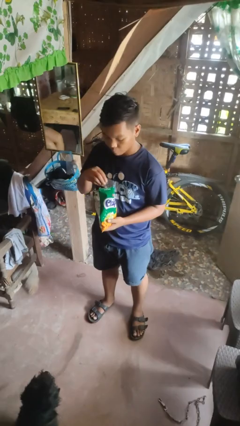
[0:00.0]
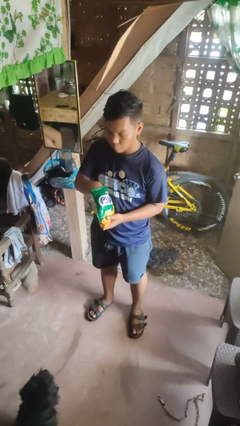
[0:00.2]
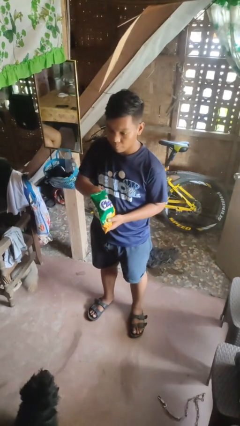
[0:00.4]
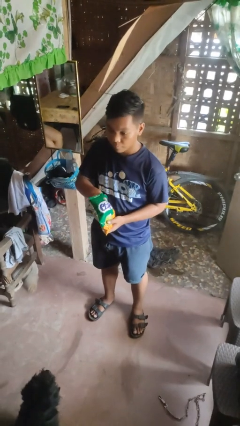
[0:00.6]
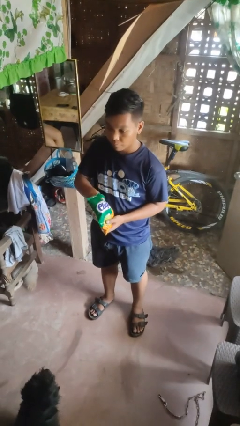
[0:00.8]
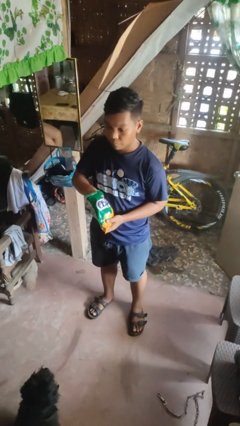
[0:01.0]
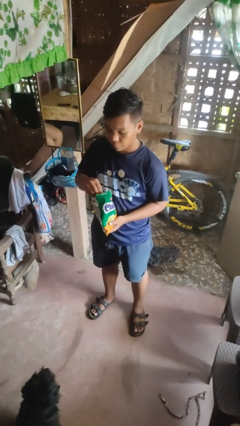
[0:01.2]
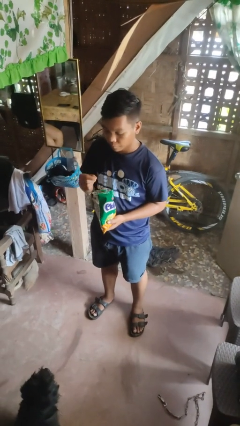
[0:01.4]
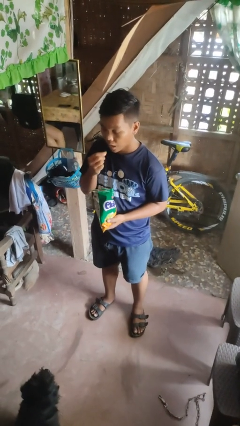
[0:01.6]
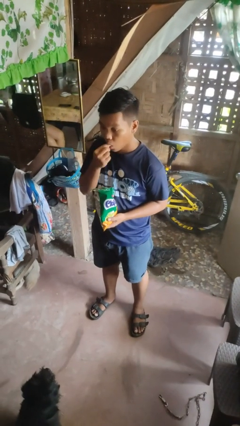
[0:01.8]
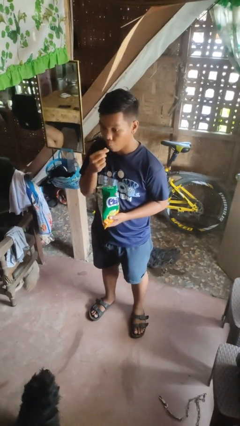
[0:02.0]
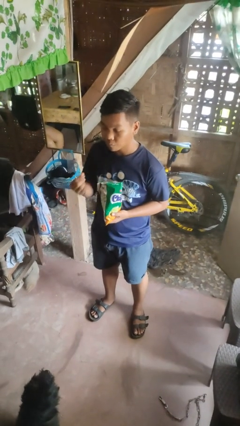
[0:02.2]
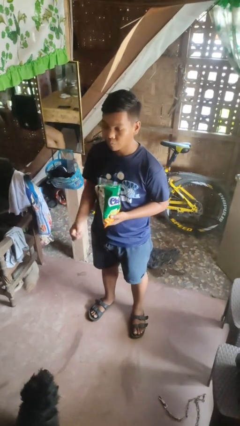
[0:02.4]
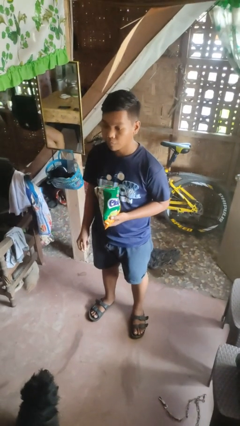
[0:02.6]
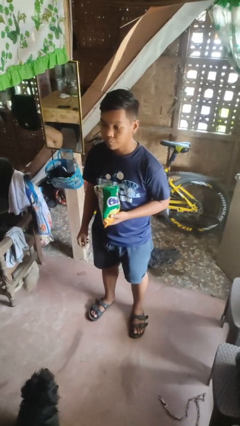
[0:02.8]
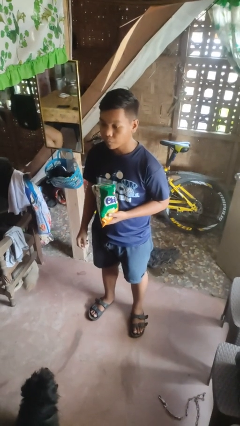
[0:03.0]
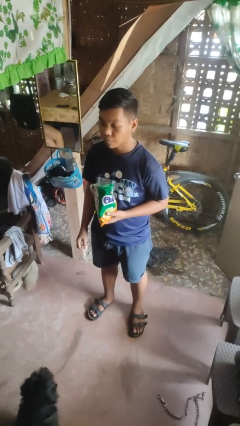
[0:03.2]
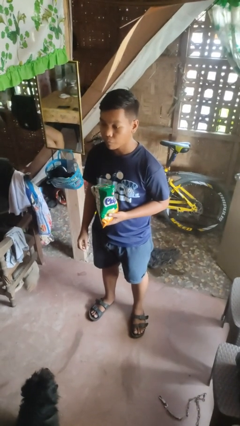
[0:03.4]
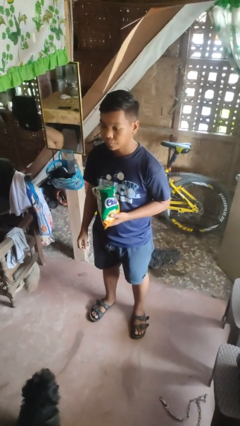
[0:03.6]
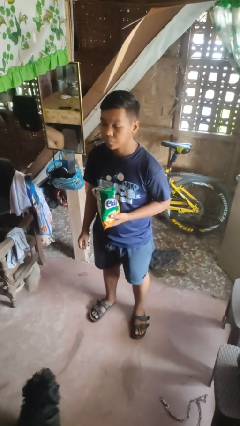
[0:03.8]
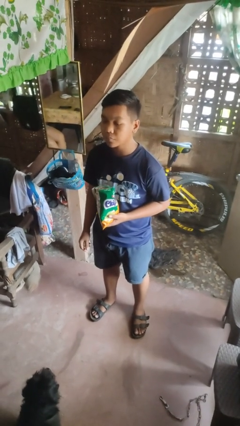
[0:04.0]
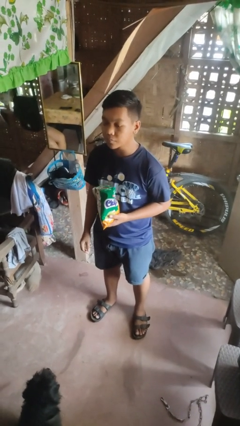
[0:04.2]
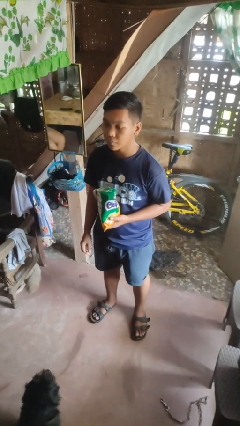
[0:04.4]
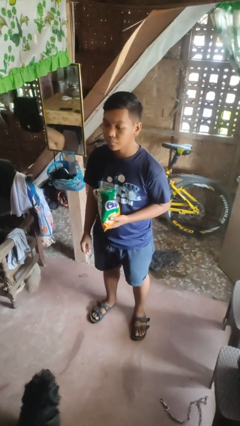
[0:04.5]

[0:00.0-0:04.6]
person eats snack from bag

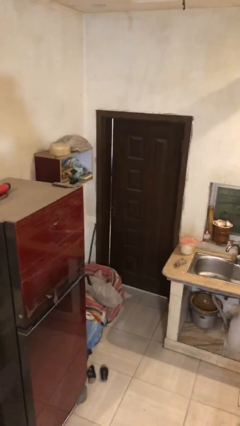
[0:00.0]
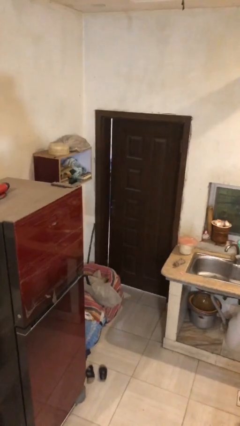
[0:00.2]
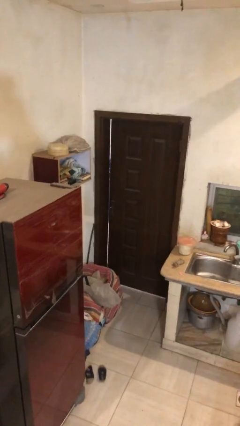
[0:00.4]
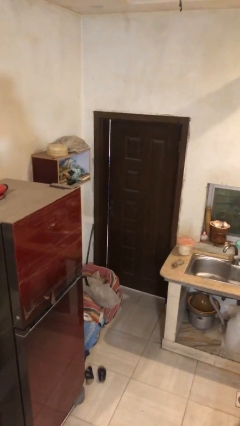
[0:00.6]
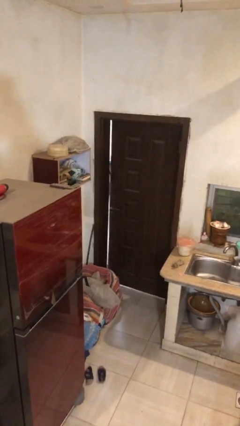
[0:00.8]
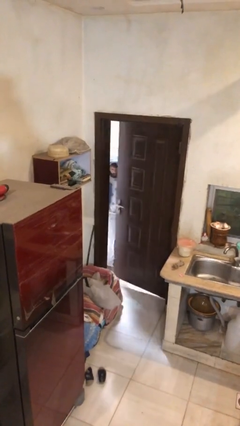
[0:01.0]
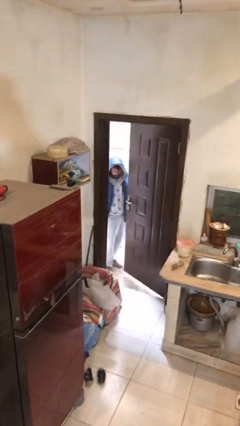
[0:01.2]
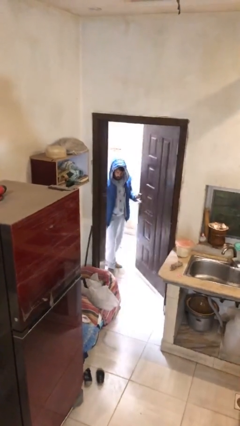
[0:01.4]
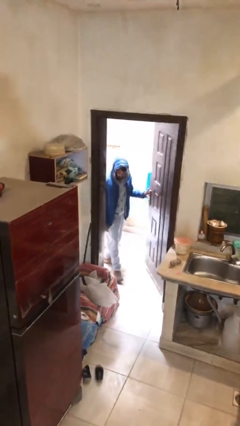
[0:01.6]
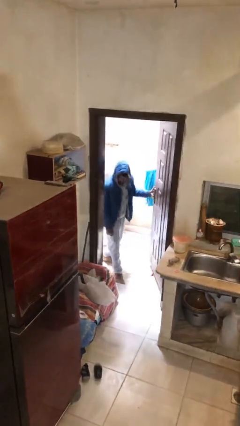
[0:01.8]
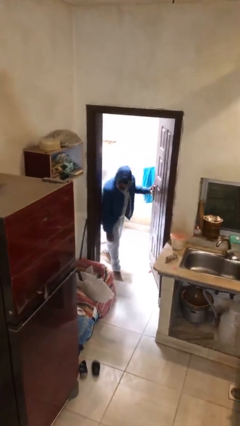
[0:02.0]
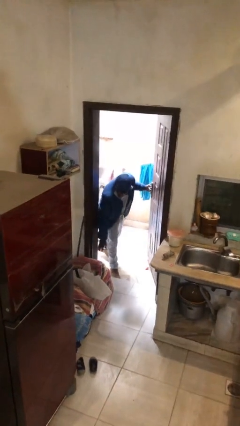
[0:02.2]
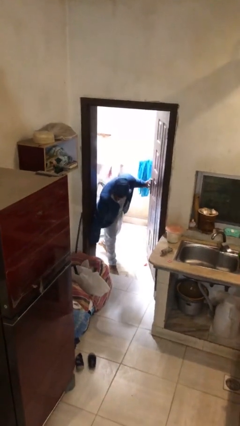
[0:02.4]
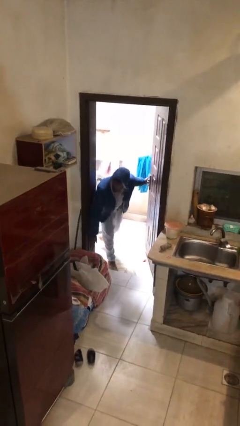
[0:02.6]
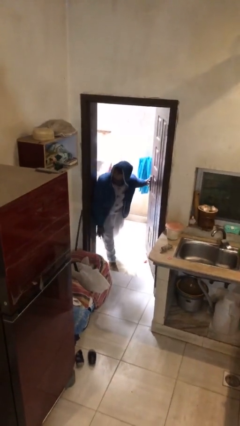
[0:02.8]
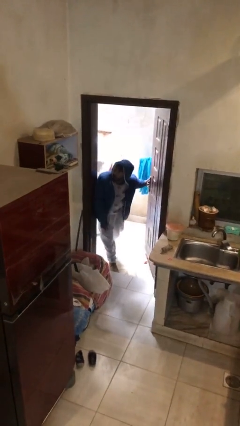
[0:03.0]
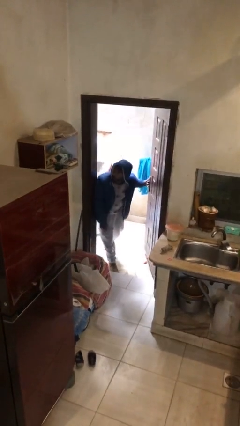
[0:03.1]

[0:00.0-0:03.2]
person opens facility door

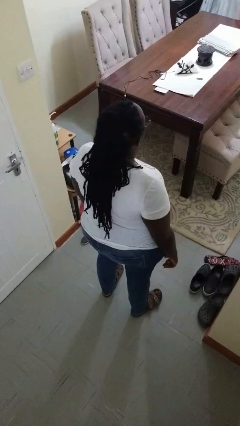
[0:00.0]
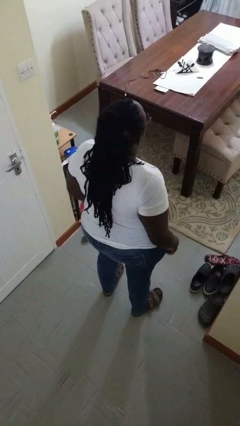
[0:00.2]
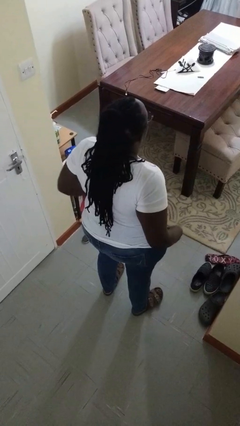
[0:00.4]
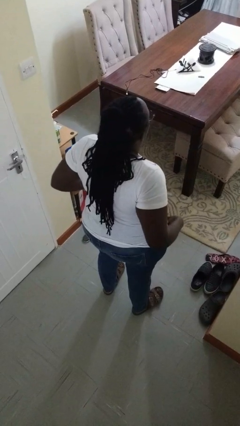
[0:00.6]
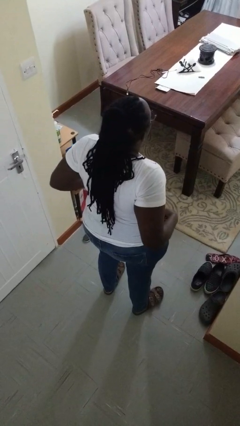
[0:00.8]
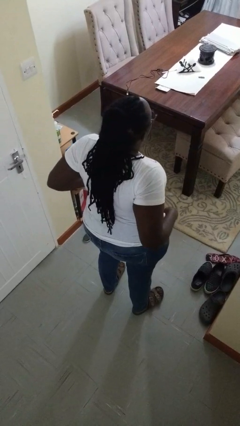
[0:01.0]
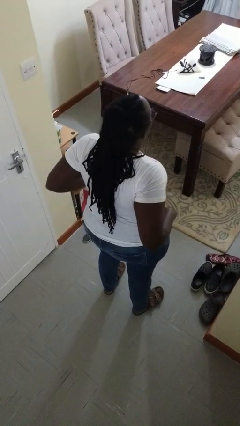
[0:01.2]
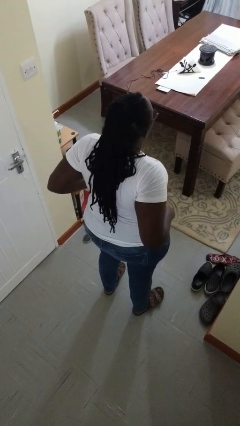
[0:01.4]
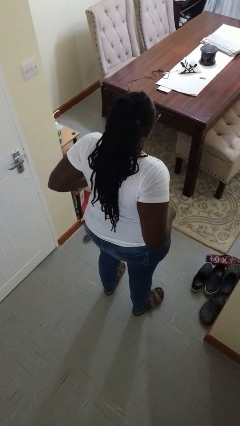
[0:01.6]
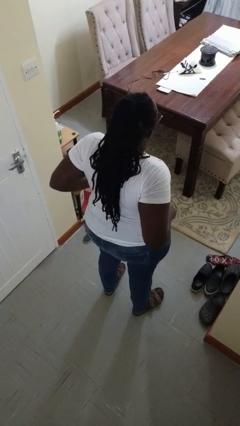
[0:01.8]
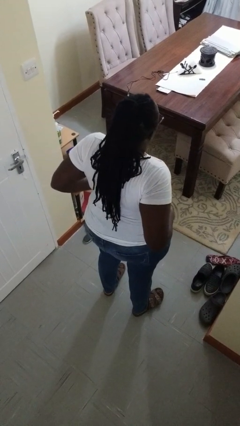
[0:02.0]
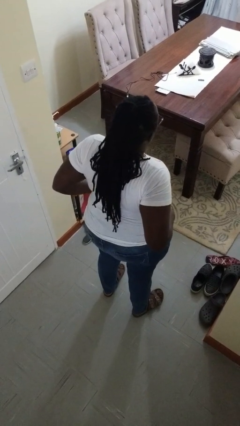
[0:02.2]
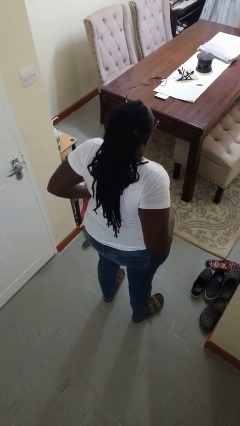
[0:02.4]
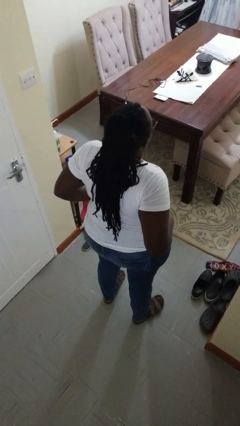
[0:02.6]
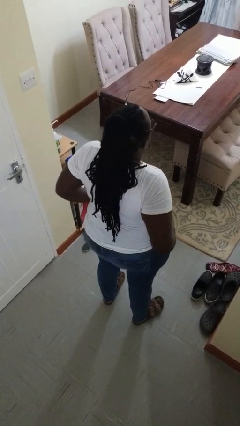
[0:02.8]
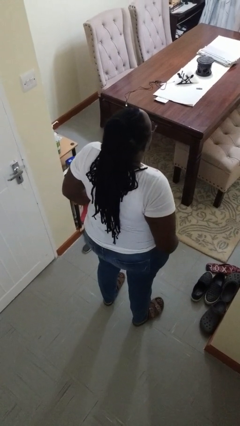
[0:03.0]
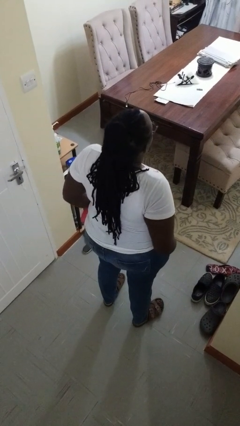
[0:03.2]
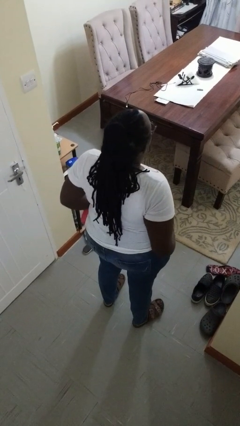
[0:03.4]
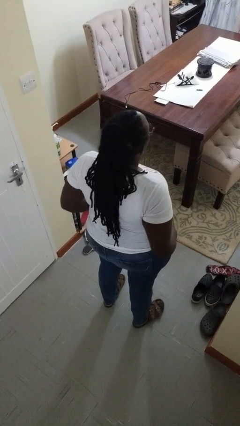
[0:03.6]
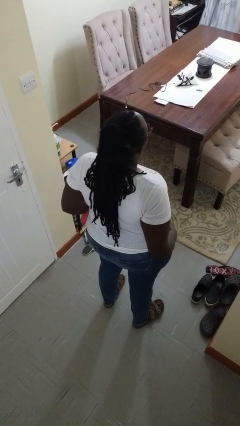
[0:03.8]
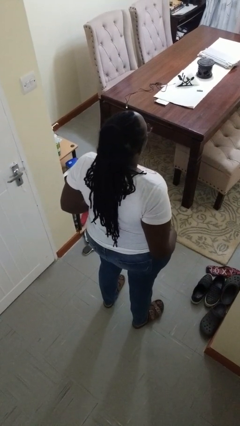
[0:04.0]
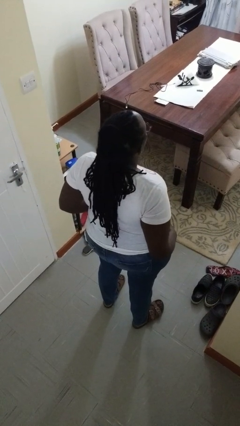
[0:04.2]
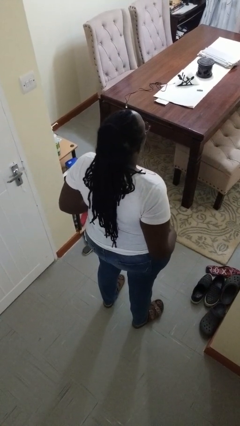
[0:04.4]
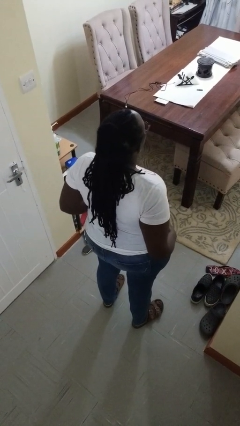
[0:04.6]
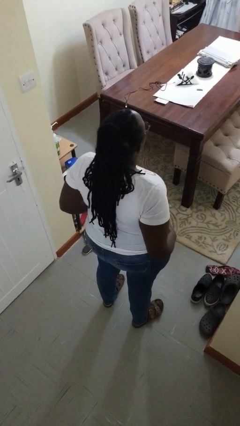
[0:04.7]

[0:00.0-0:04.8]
person puts hands in back pockets

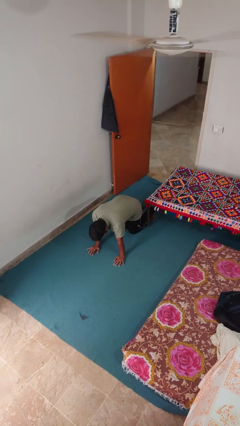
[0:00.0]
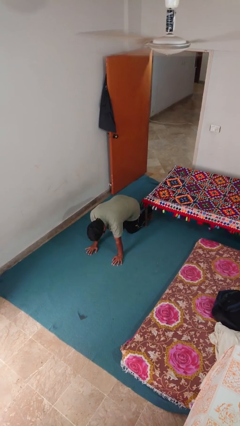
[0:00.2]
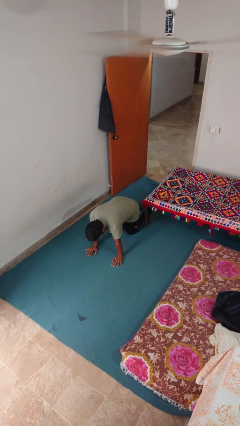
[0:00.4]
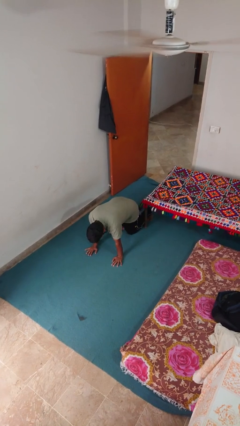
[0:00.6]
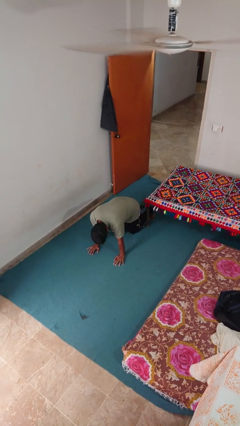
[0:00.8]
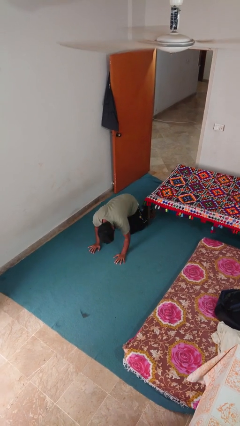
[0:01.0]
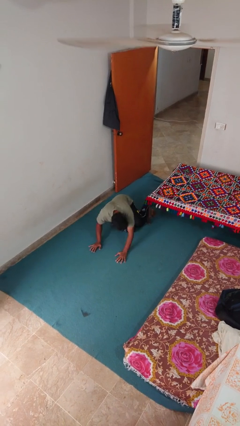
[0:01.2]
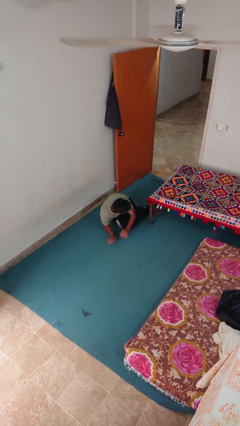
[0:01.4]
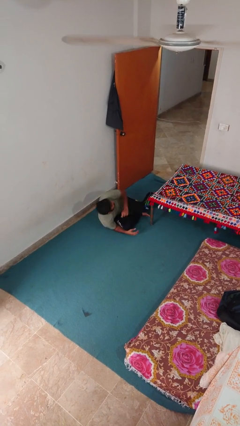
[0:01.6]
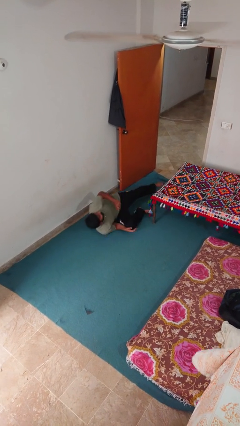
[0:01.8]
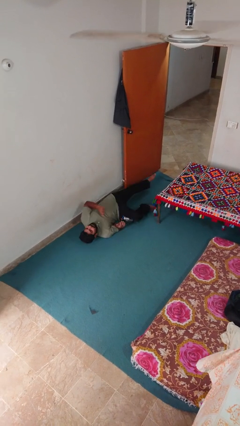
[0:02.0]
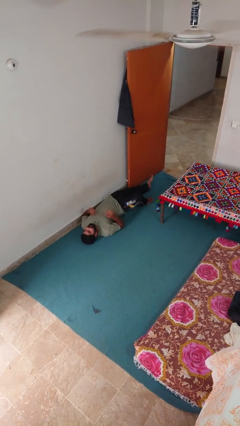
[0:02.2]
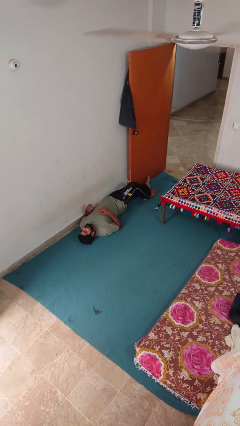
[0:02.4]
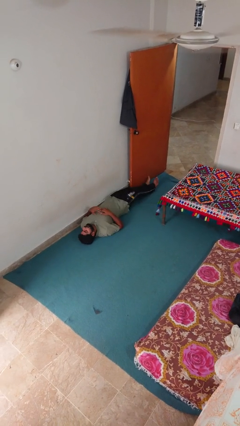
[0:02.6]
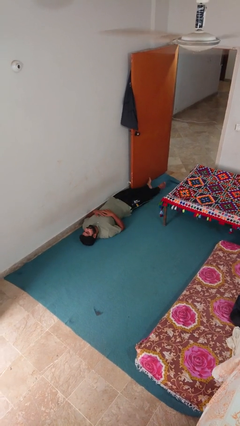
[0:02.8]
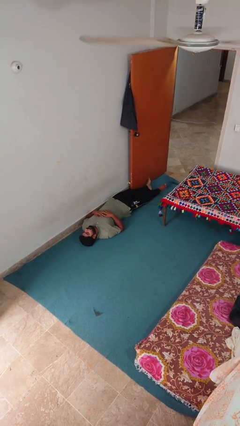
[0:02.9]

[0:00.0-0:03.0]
person lies down on floor

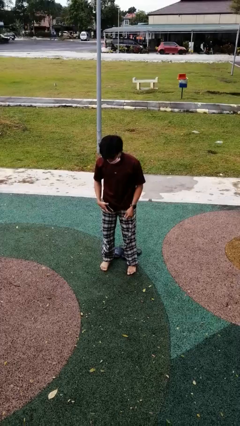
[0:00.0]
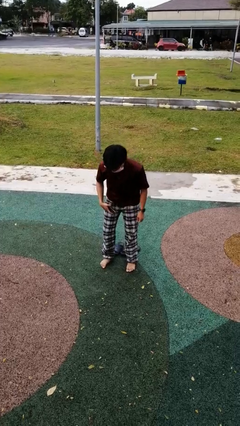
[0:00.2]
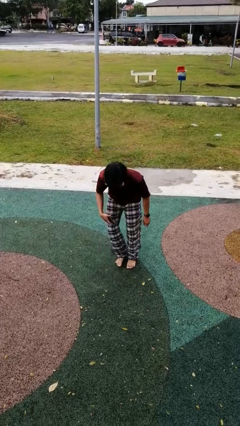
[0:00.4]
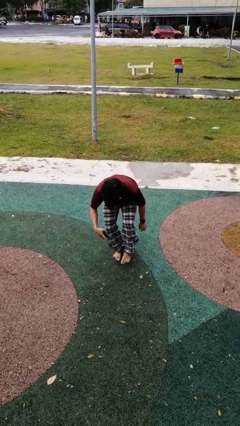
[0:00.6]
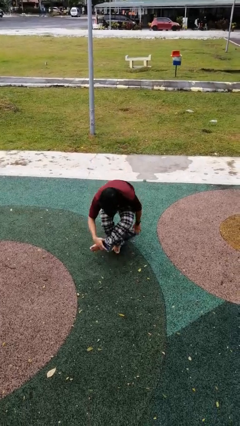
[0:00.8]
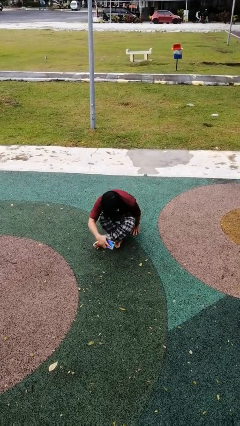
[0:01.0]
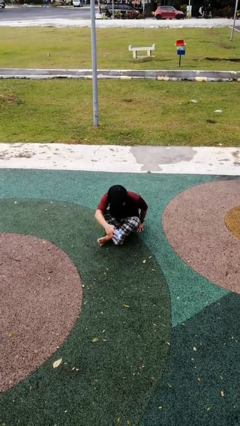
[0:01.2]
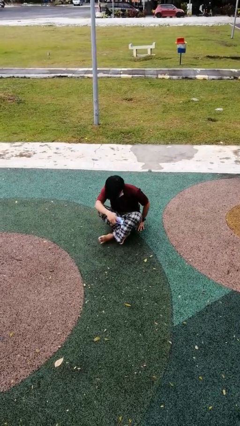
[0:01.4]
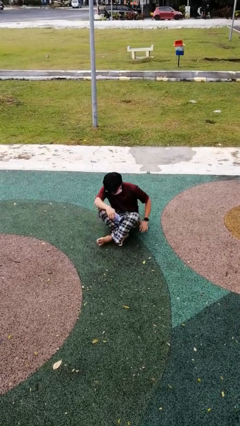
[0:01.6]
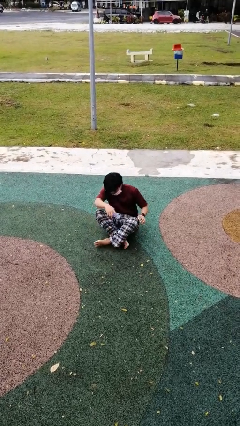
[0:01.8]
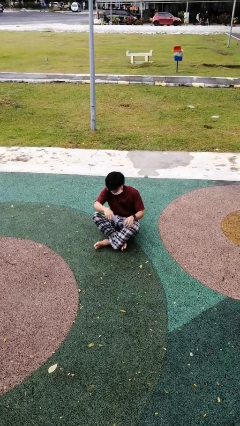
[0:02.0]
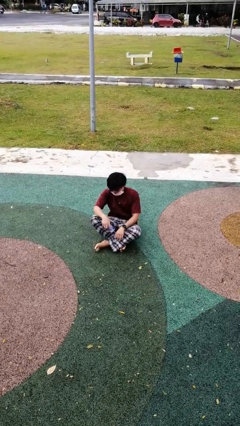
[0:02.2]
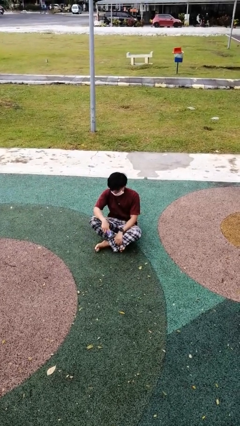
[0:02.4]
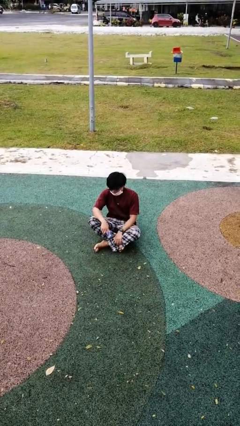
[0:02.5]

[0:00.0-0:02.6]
person sits crisscross
